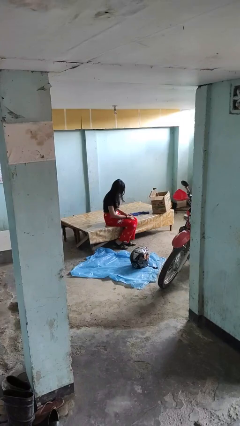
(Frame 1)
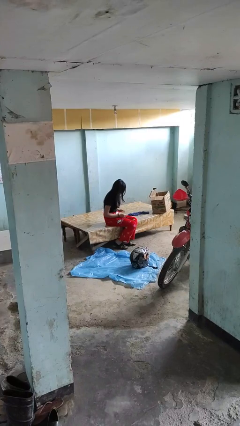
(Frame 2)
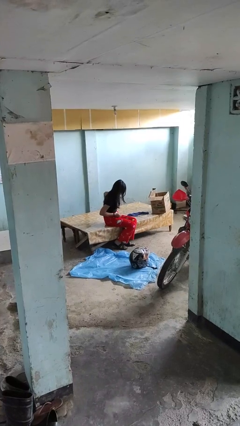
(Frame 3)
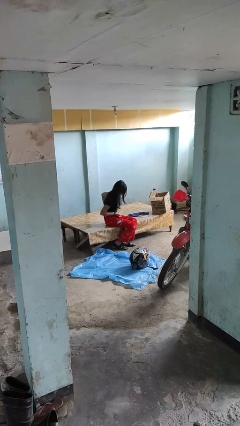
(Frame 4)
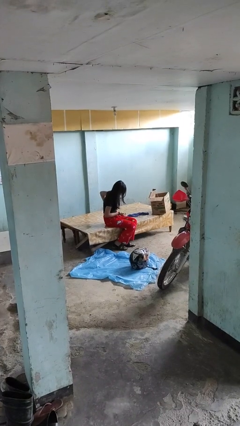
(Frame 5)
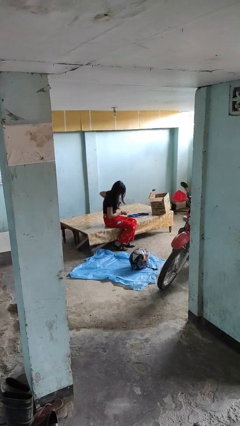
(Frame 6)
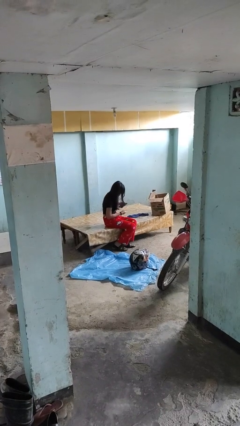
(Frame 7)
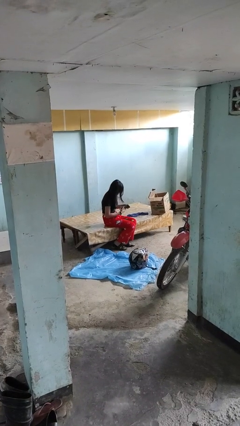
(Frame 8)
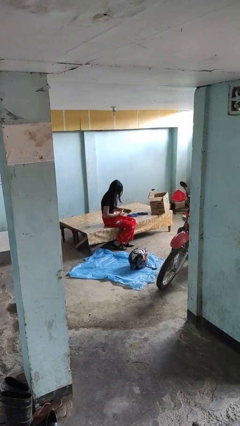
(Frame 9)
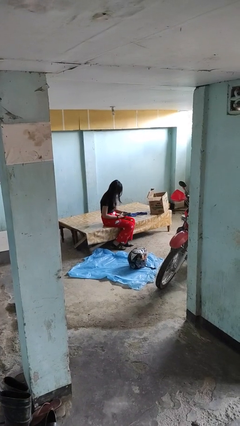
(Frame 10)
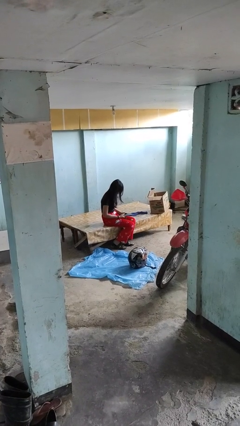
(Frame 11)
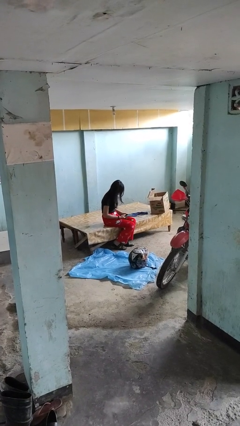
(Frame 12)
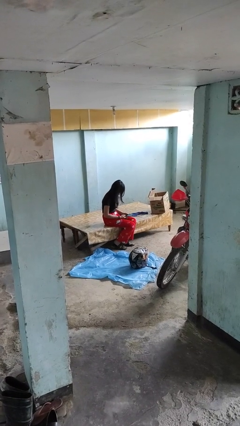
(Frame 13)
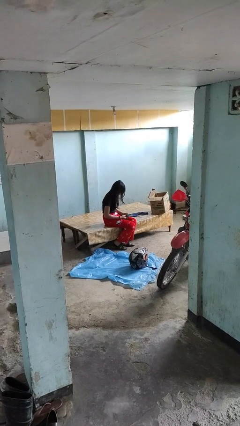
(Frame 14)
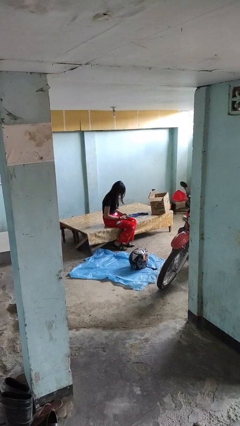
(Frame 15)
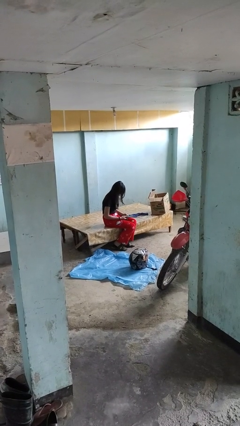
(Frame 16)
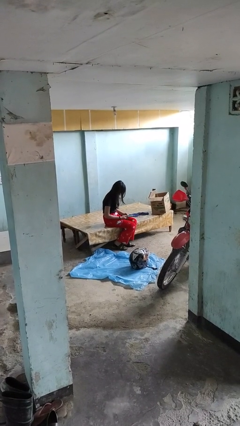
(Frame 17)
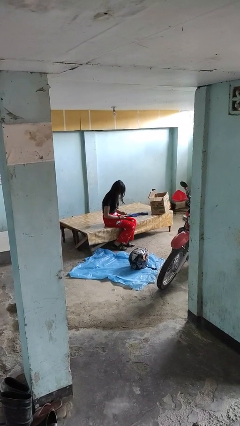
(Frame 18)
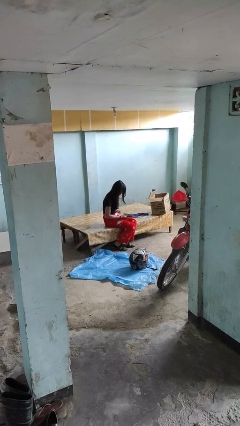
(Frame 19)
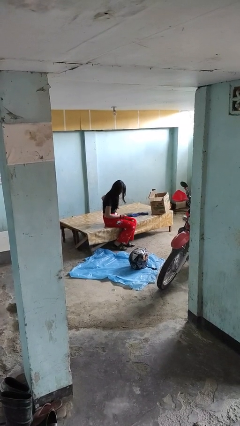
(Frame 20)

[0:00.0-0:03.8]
person takes phone from pocket

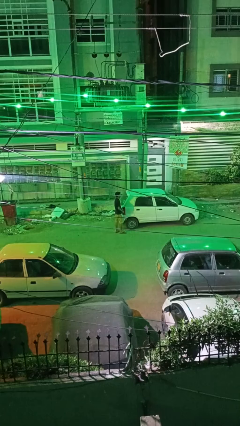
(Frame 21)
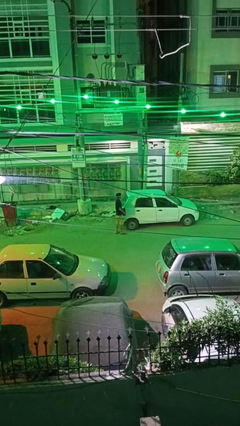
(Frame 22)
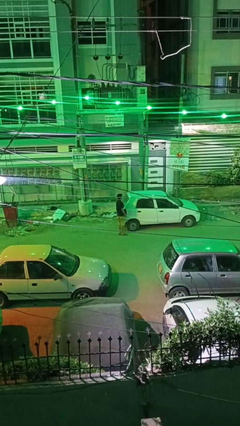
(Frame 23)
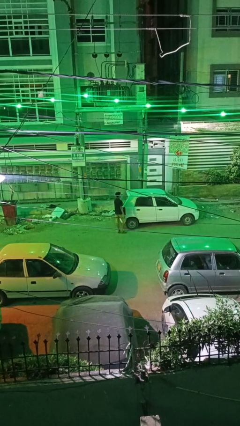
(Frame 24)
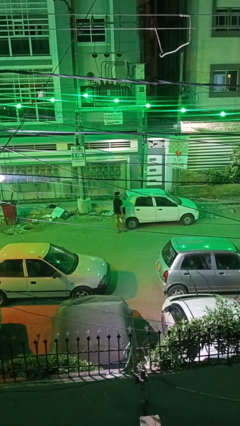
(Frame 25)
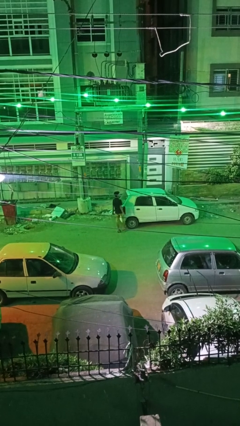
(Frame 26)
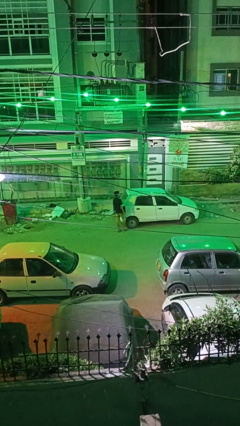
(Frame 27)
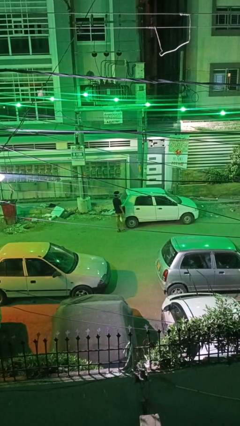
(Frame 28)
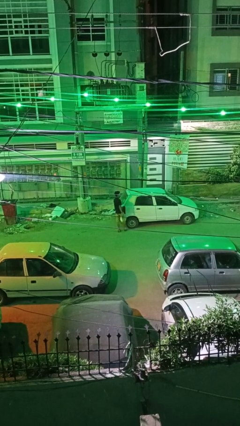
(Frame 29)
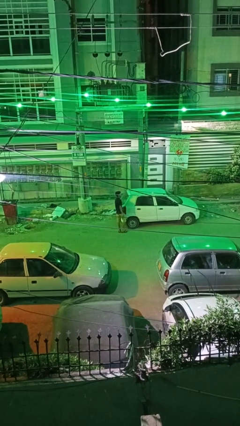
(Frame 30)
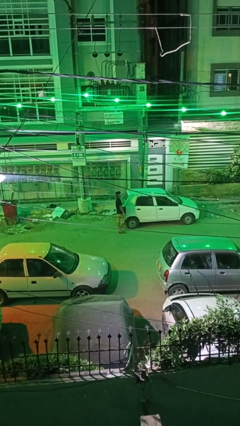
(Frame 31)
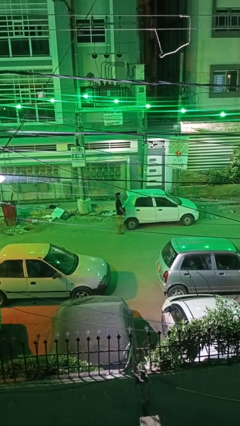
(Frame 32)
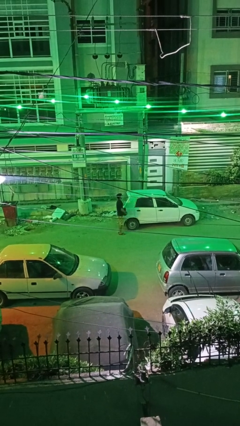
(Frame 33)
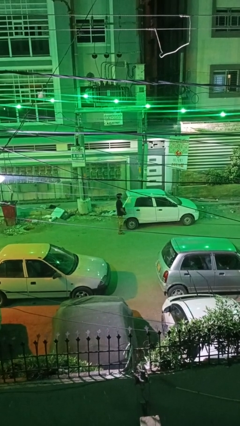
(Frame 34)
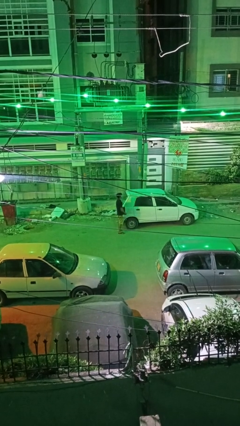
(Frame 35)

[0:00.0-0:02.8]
person kicks car tires

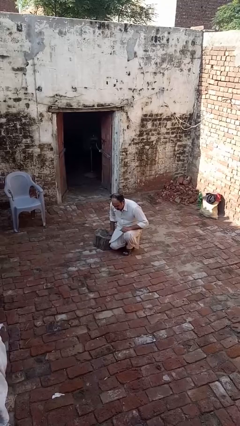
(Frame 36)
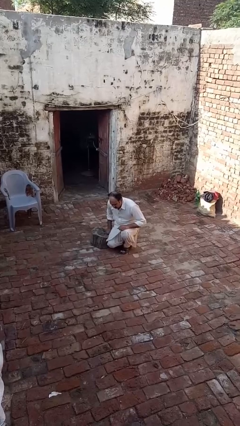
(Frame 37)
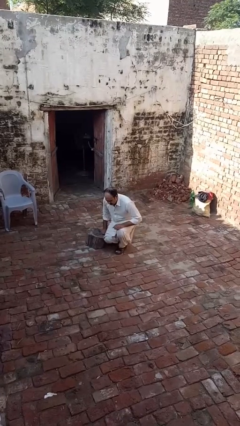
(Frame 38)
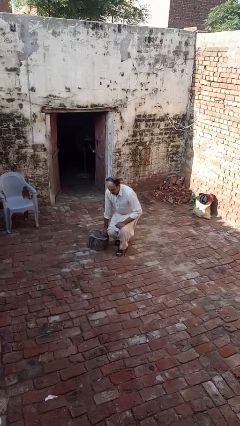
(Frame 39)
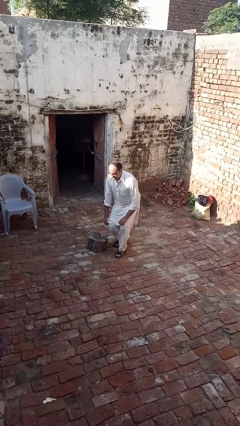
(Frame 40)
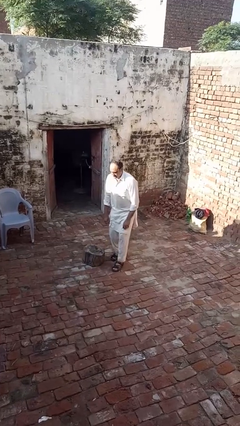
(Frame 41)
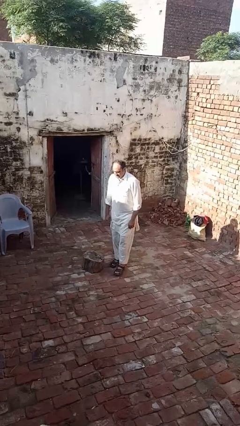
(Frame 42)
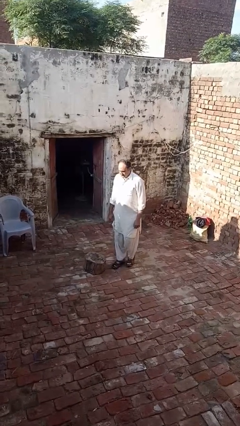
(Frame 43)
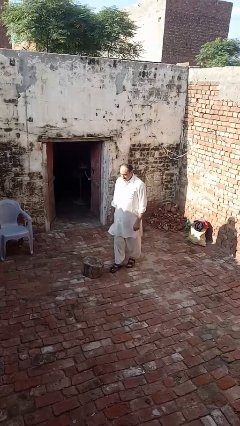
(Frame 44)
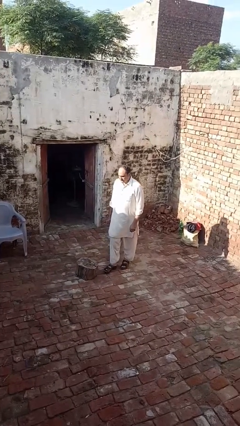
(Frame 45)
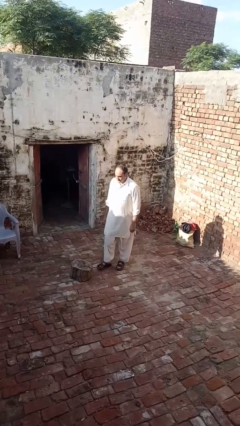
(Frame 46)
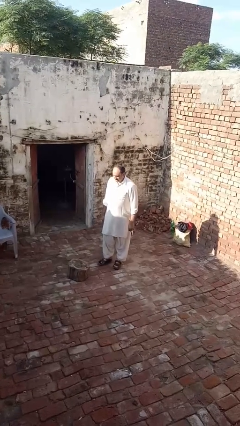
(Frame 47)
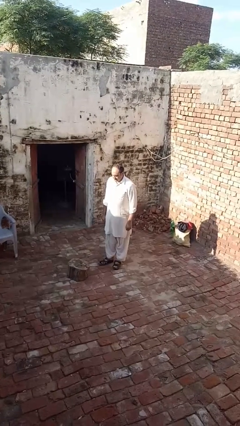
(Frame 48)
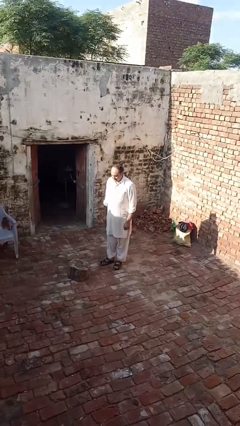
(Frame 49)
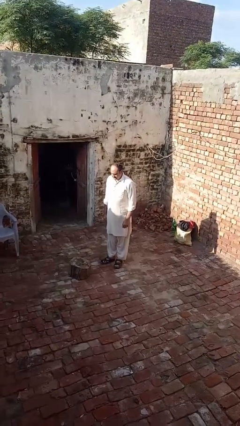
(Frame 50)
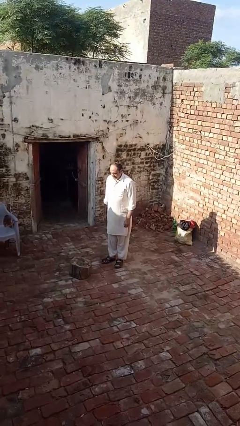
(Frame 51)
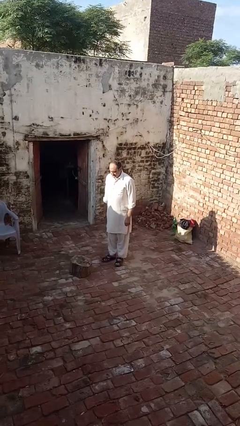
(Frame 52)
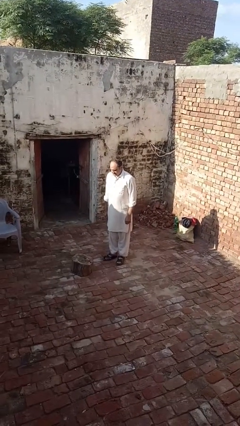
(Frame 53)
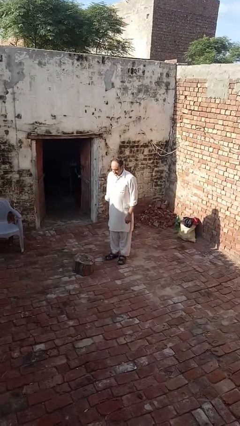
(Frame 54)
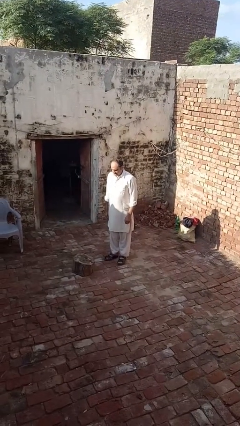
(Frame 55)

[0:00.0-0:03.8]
person stands up from floor

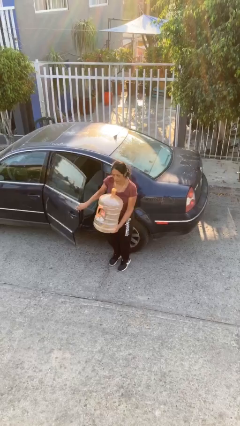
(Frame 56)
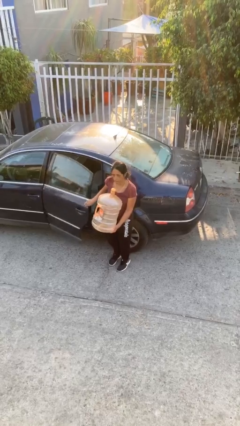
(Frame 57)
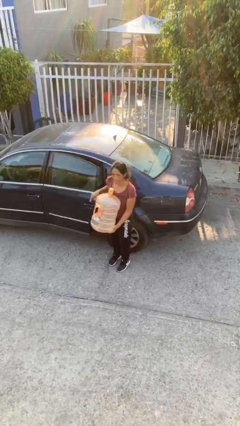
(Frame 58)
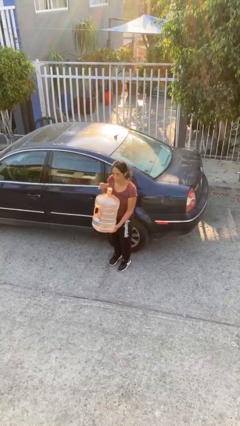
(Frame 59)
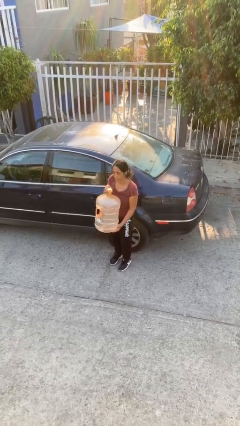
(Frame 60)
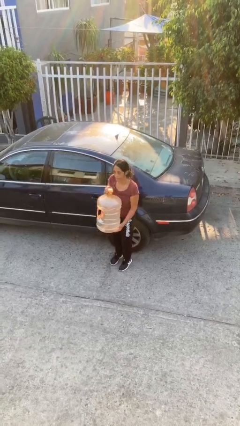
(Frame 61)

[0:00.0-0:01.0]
person closes car door

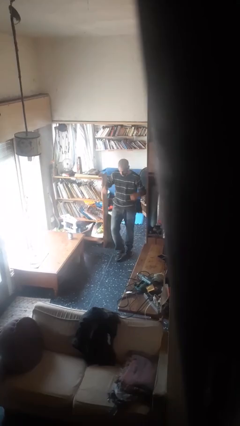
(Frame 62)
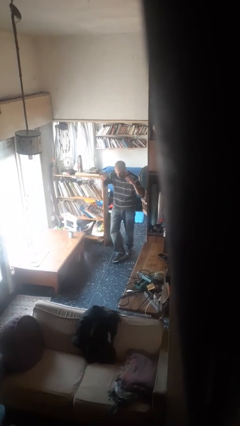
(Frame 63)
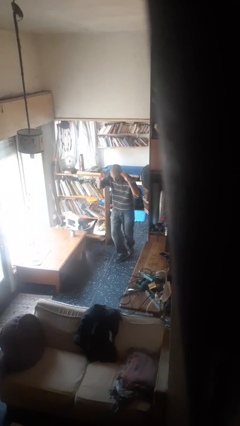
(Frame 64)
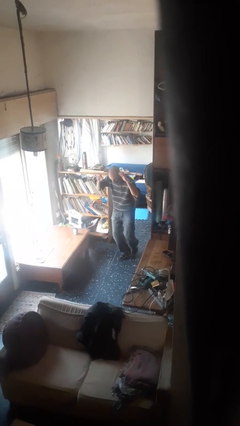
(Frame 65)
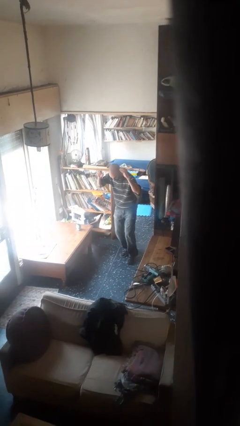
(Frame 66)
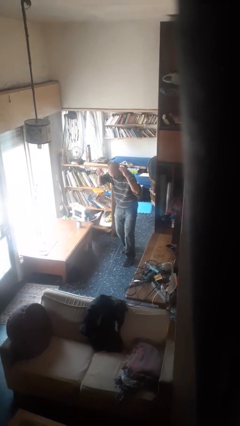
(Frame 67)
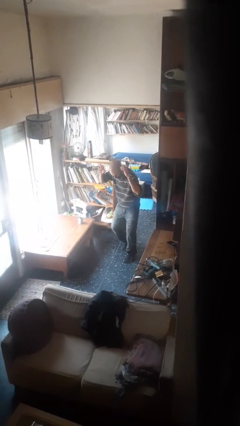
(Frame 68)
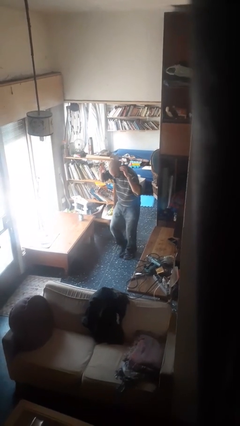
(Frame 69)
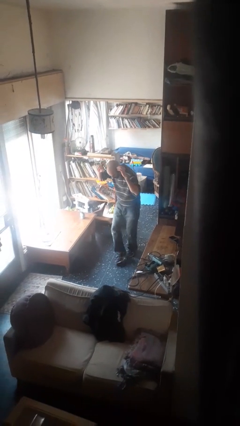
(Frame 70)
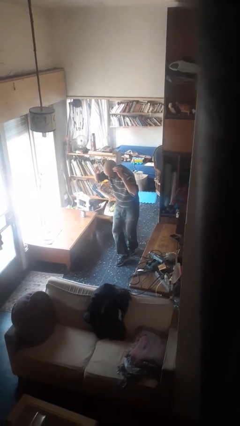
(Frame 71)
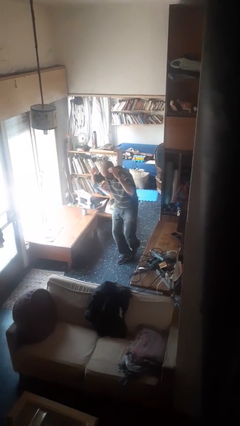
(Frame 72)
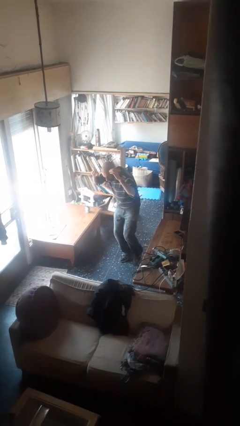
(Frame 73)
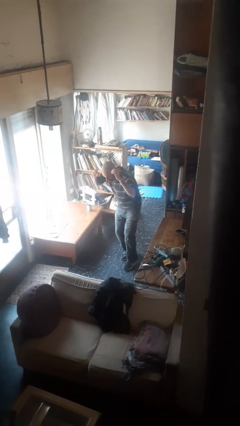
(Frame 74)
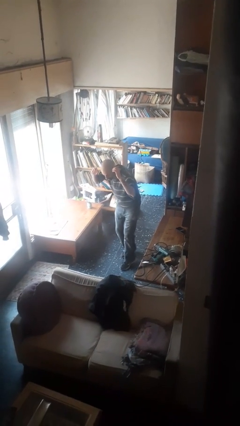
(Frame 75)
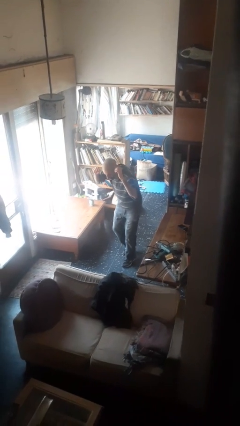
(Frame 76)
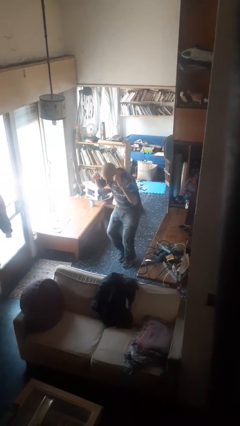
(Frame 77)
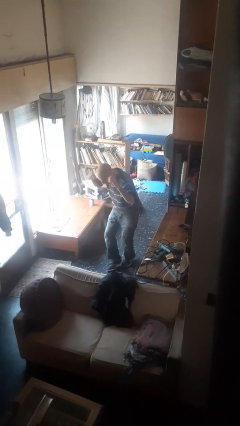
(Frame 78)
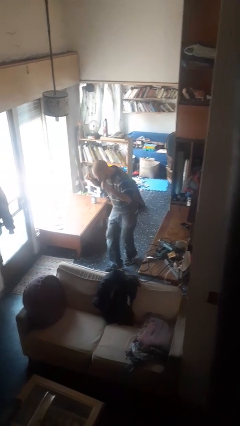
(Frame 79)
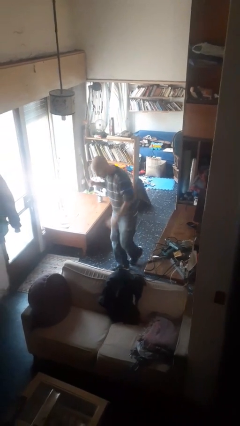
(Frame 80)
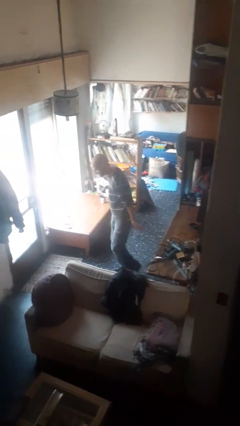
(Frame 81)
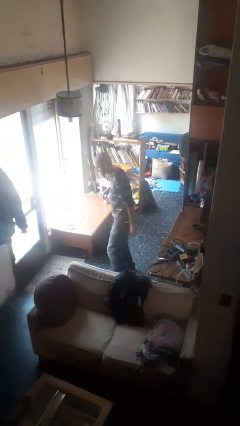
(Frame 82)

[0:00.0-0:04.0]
person walks tiptoe

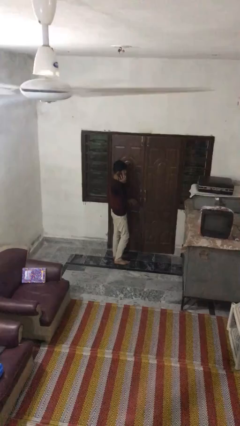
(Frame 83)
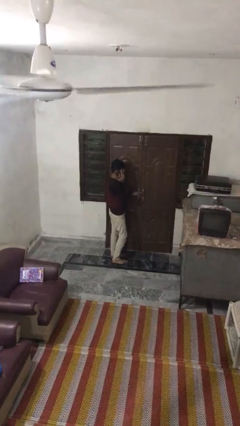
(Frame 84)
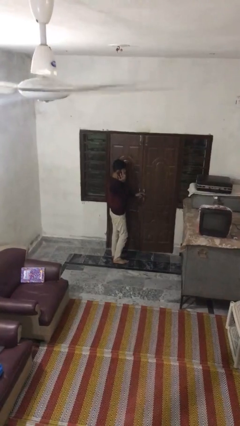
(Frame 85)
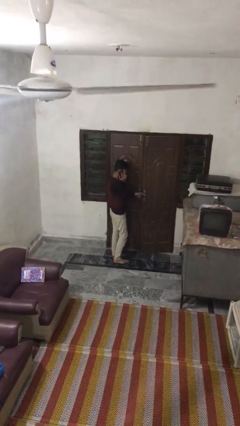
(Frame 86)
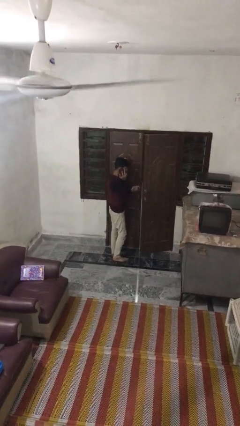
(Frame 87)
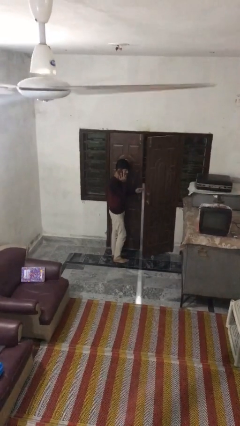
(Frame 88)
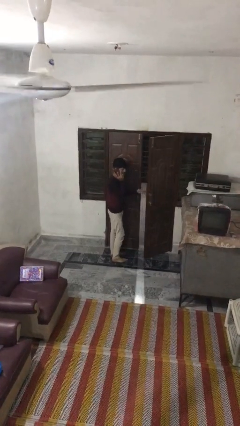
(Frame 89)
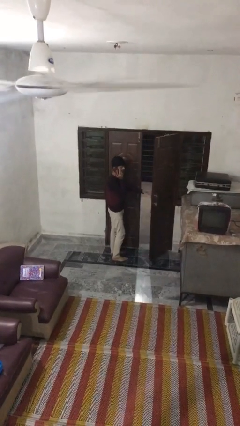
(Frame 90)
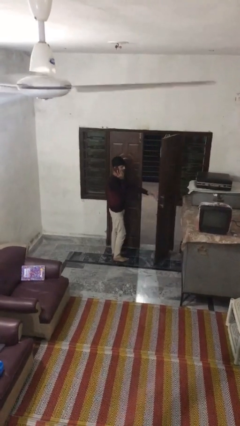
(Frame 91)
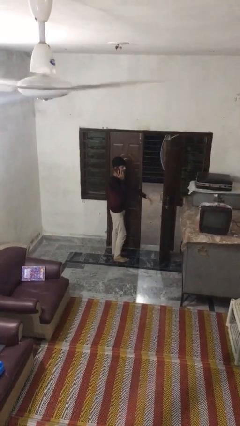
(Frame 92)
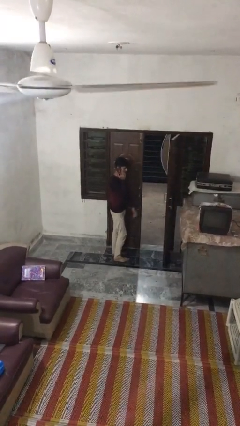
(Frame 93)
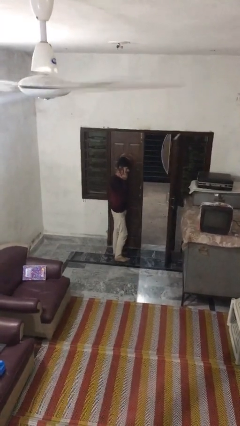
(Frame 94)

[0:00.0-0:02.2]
person opens facility door
